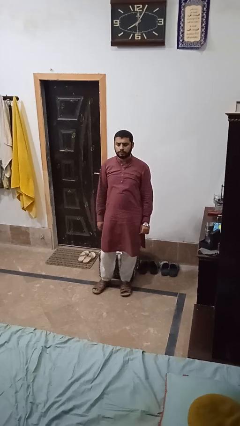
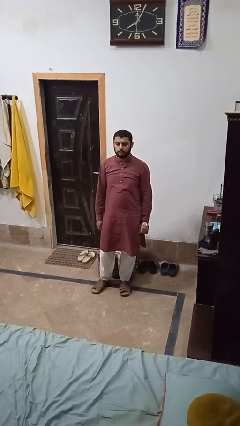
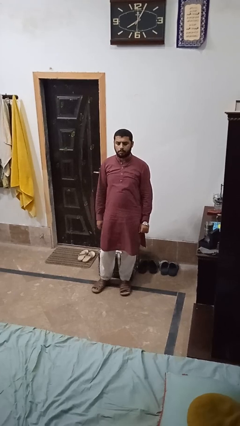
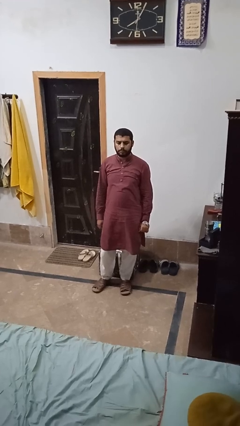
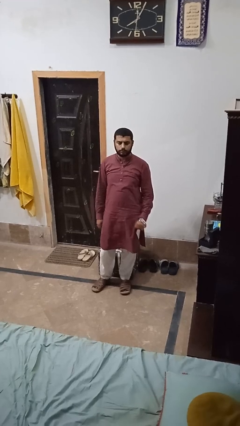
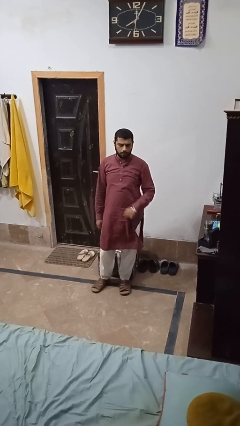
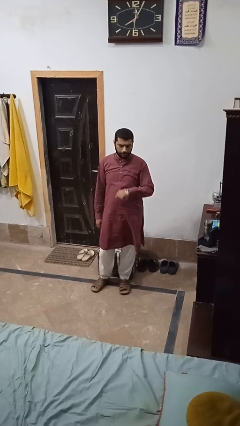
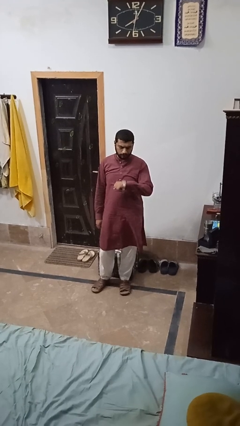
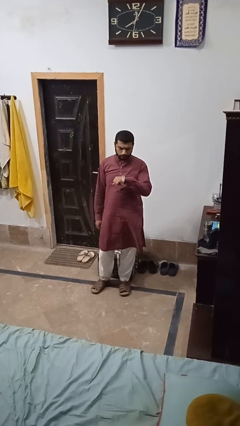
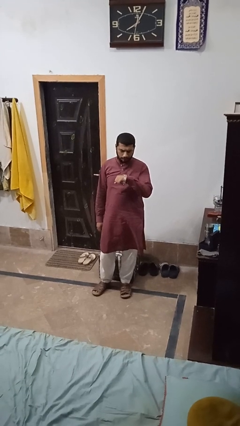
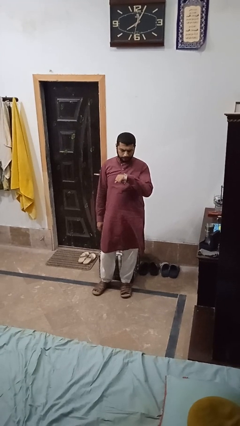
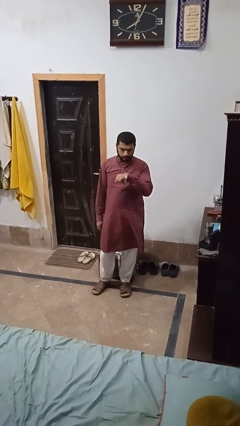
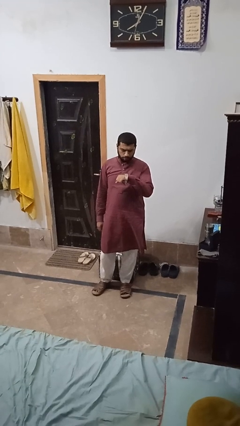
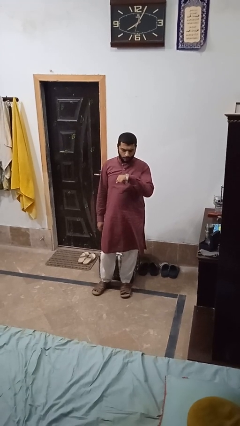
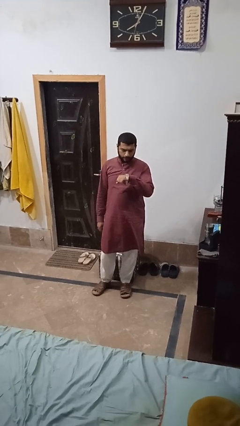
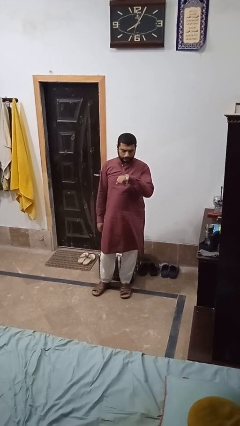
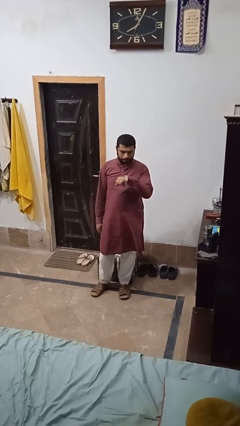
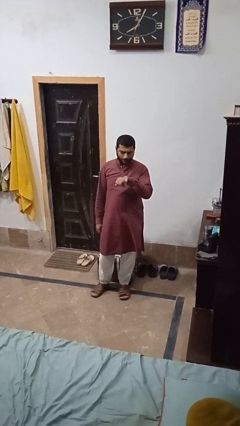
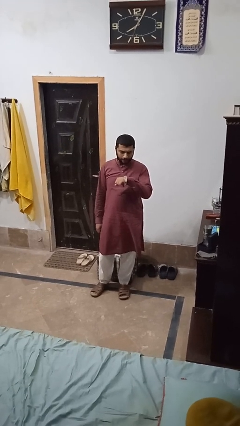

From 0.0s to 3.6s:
person looks at wristwatch

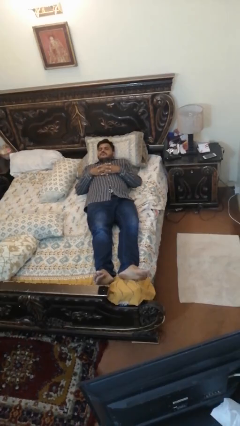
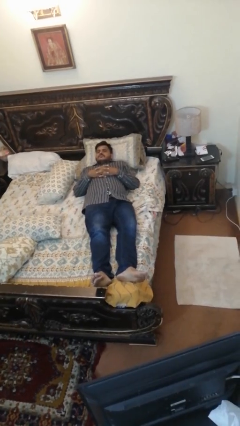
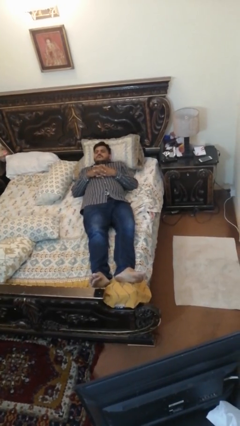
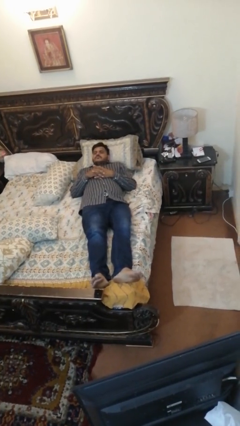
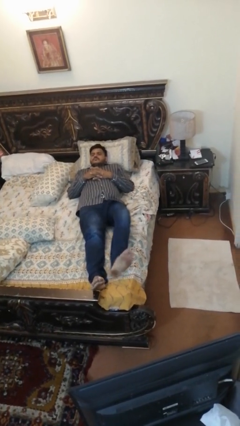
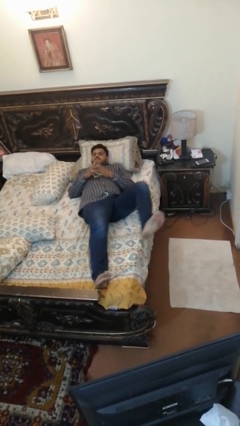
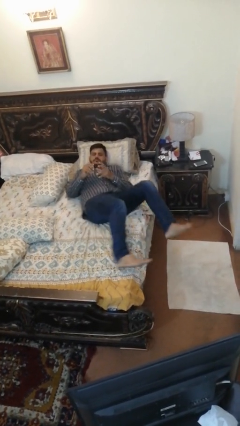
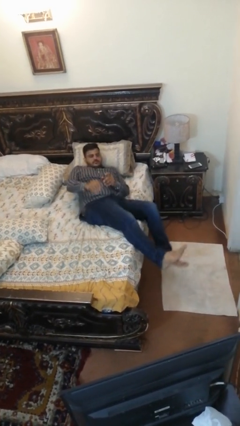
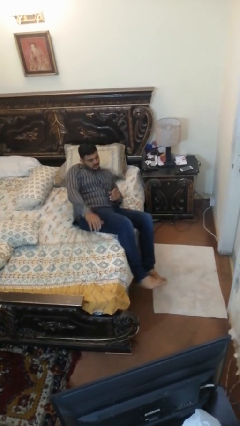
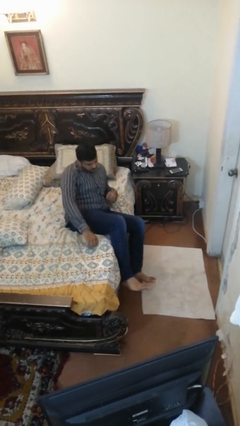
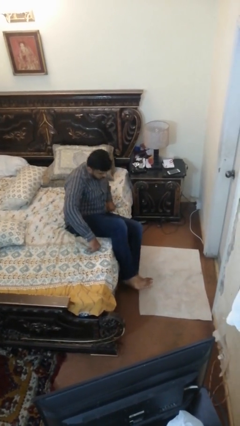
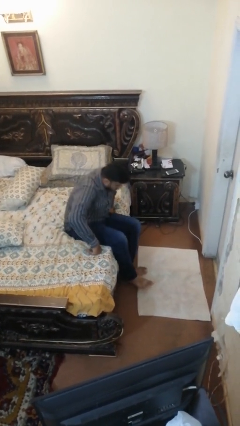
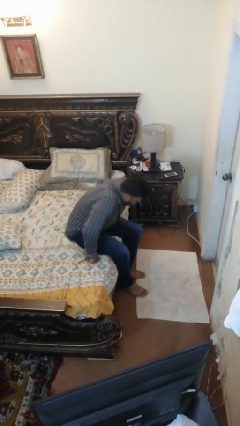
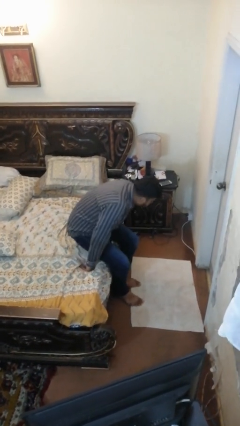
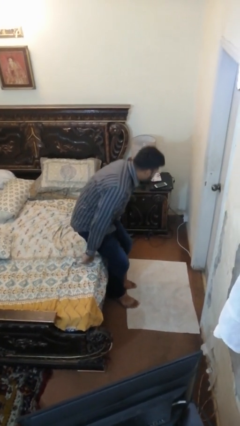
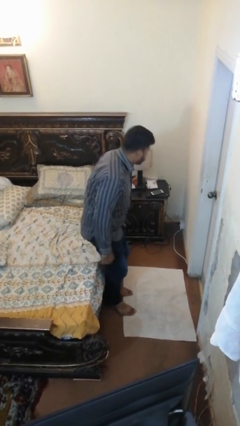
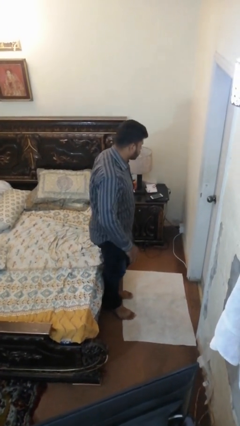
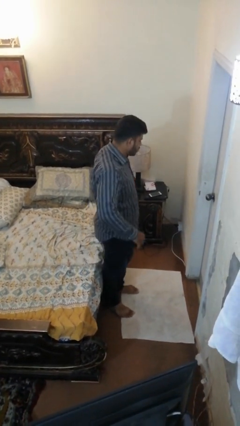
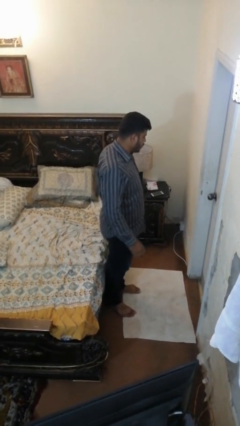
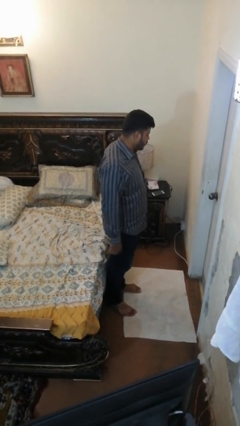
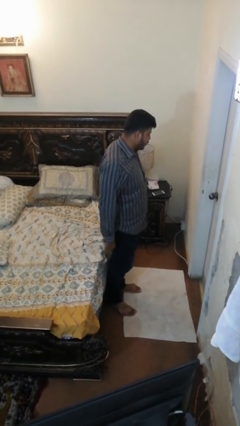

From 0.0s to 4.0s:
person stands up

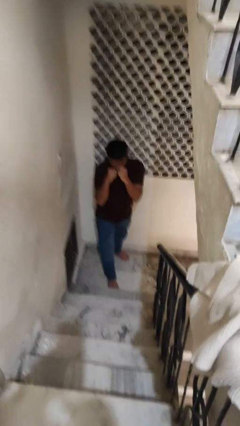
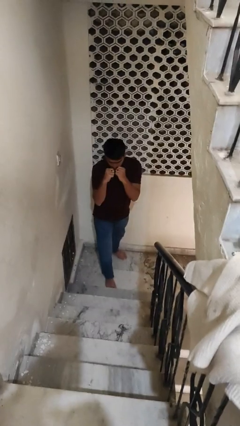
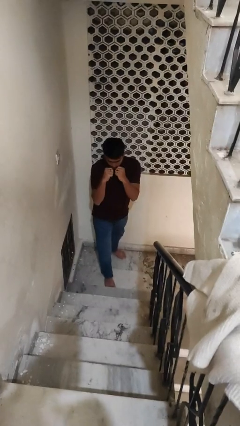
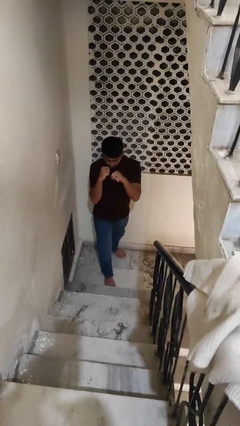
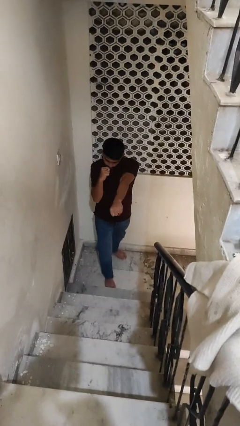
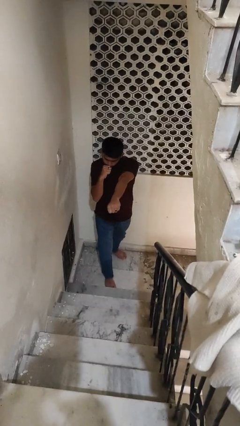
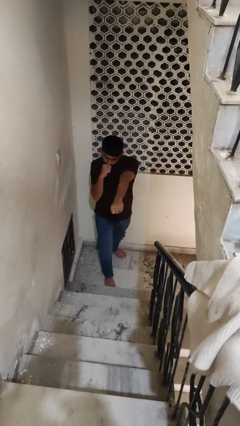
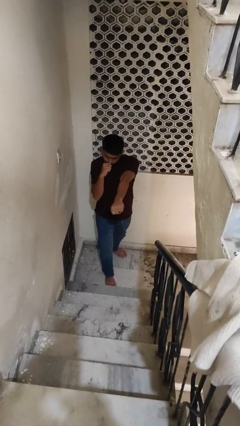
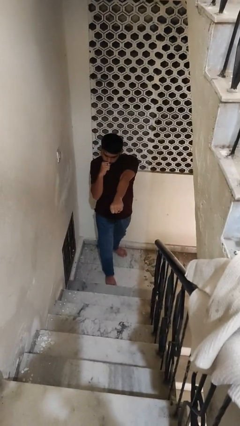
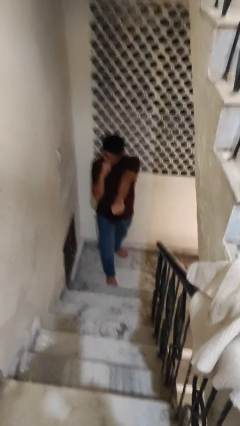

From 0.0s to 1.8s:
person punches

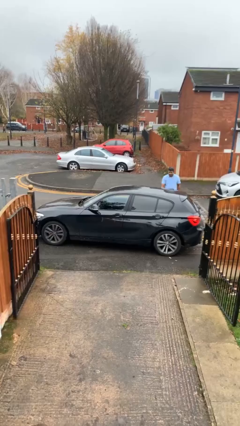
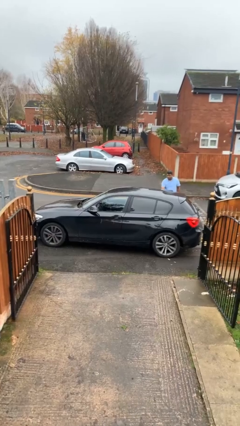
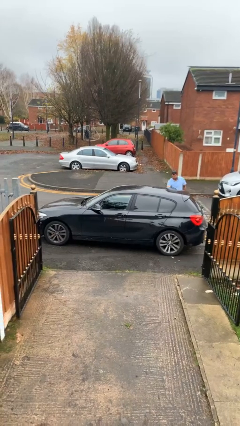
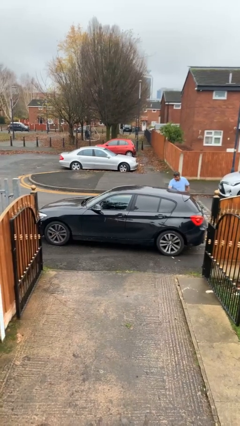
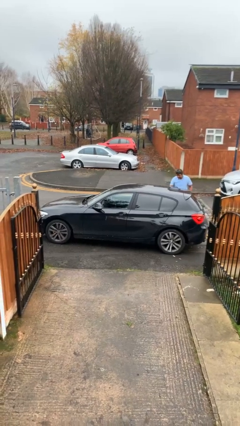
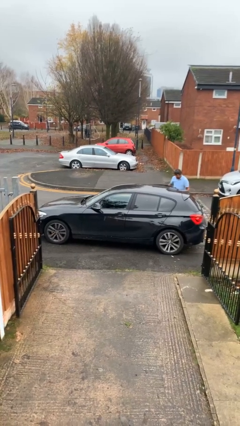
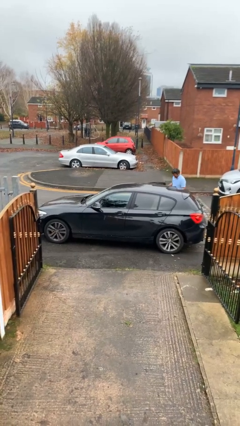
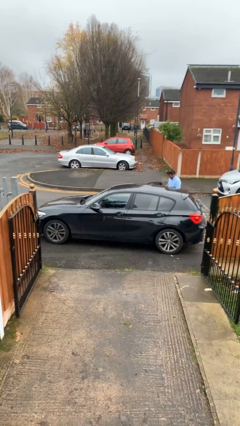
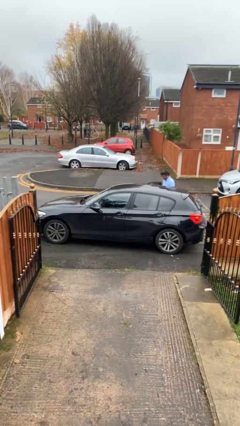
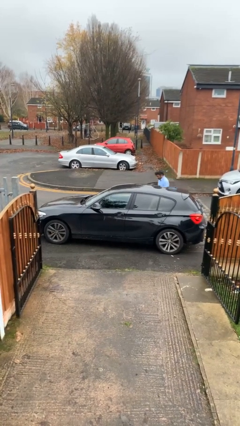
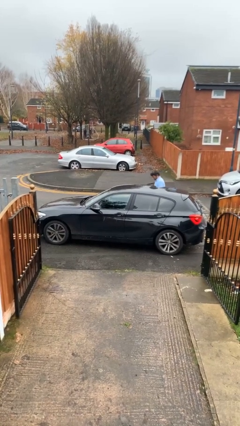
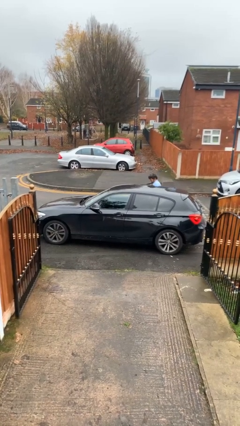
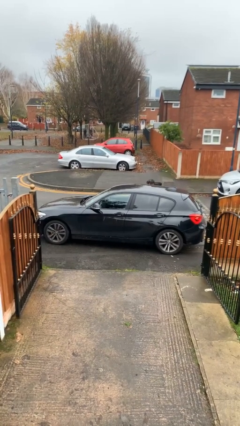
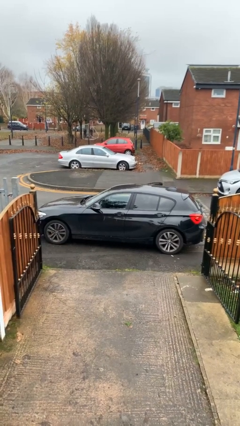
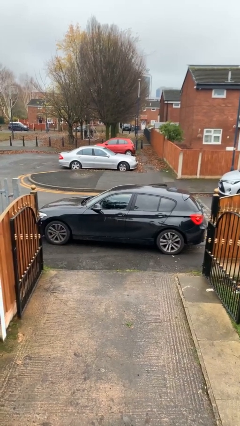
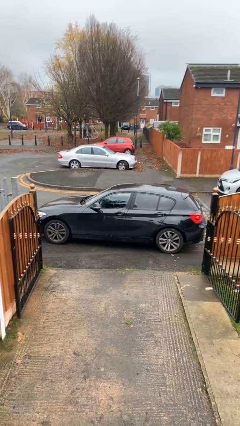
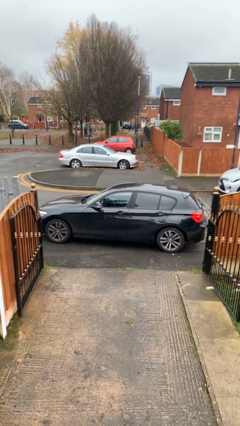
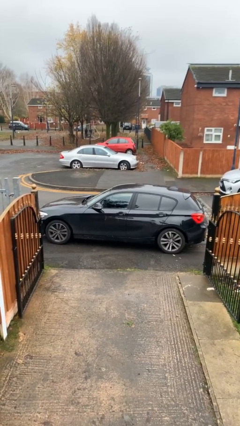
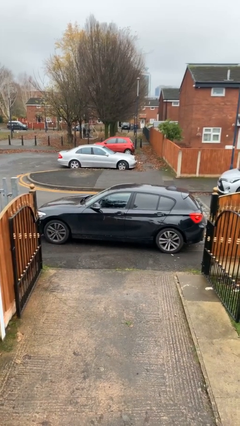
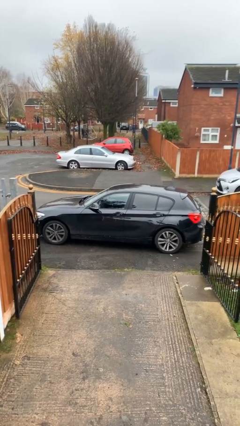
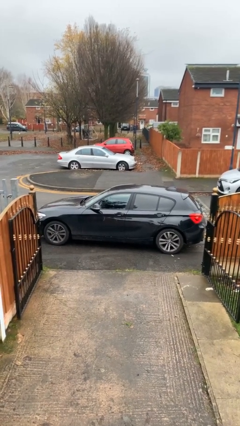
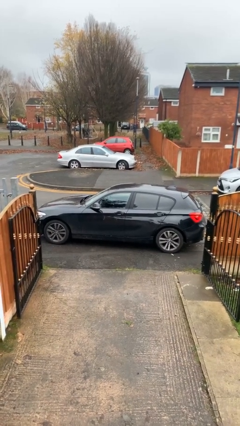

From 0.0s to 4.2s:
car picks up person

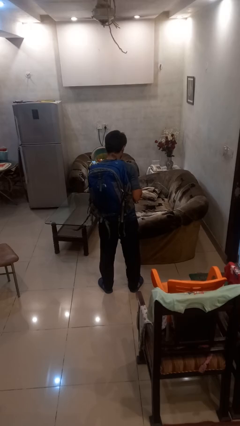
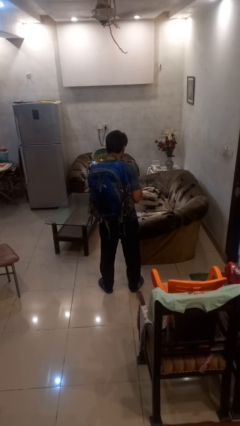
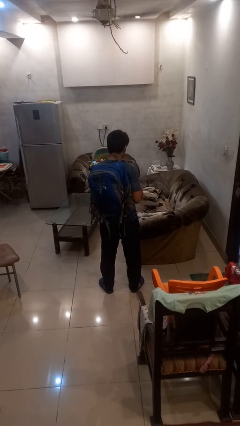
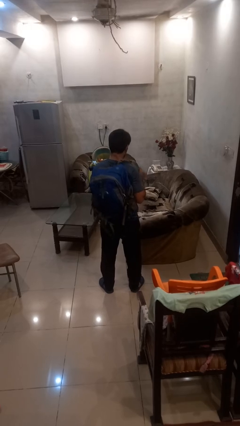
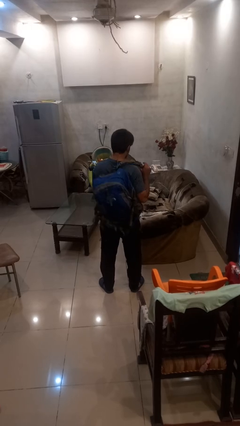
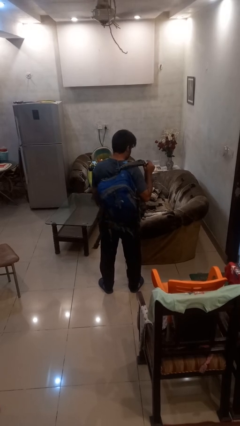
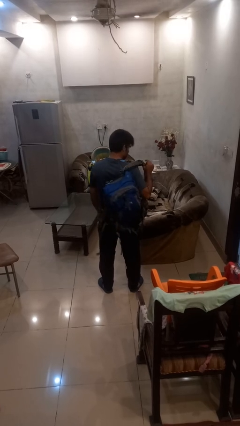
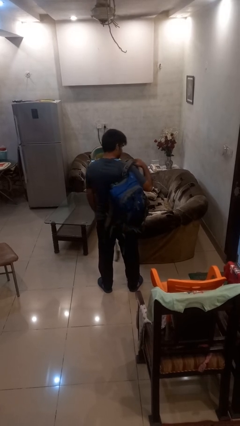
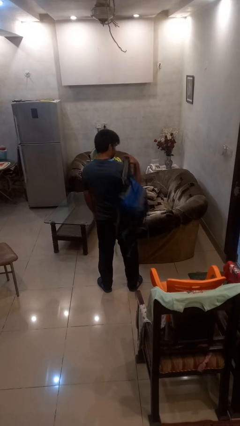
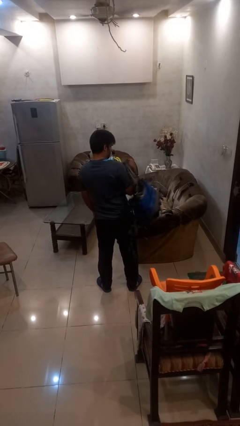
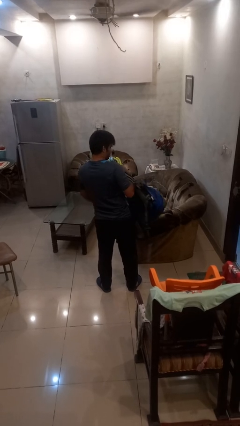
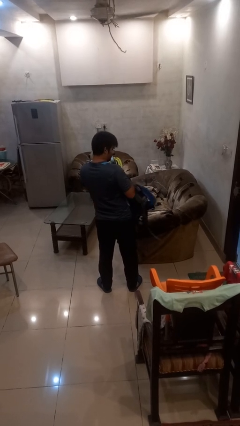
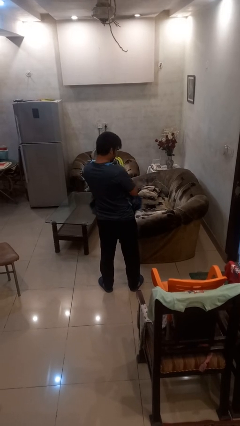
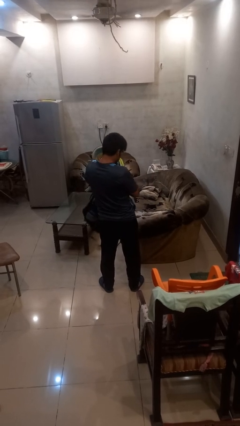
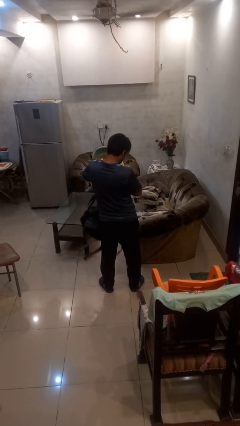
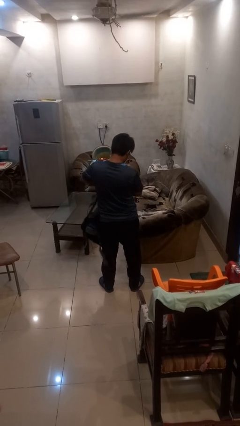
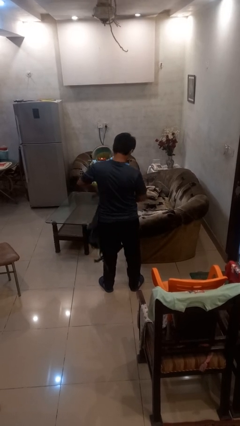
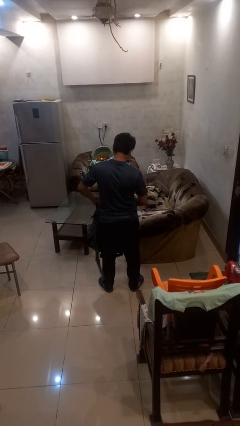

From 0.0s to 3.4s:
person takes off backpack
